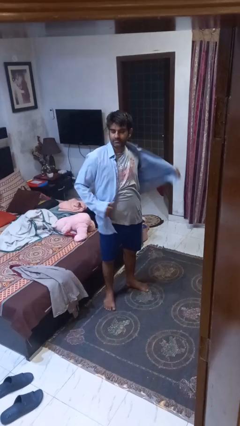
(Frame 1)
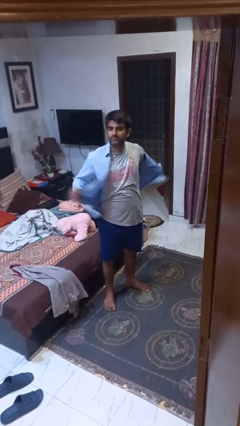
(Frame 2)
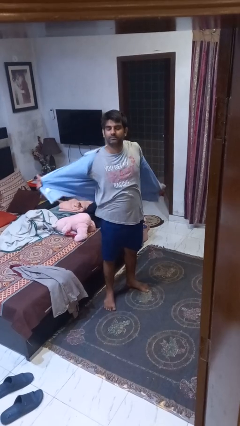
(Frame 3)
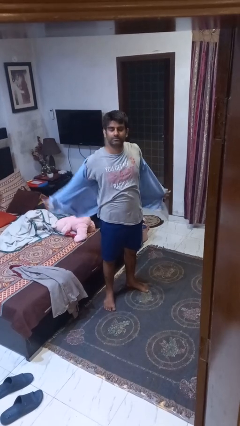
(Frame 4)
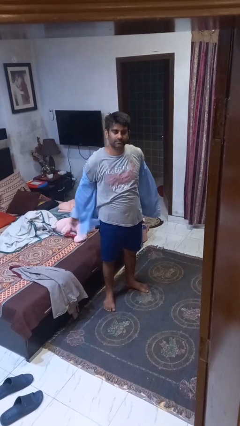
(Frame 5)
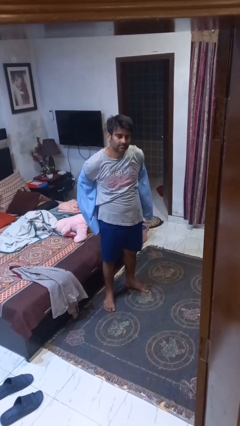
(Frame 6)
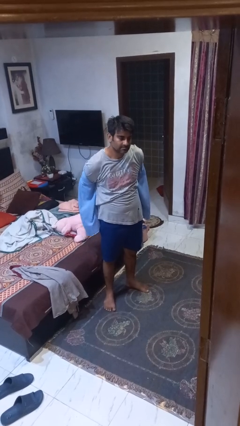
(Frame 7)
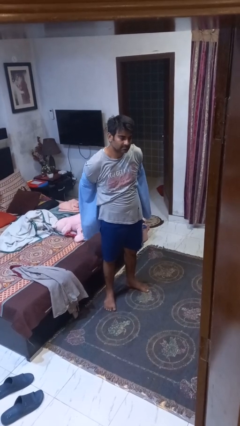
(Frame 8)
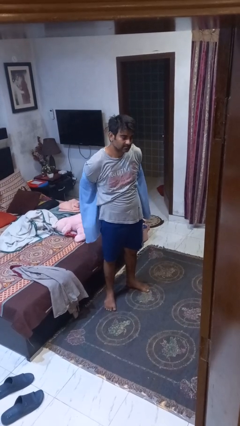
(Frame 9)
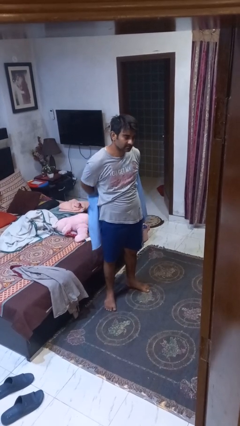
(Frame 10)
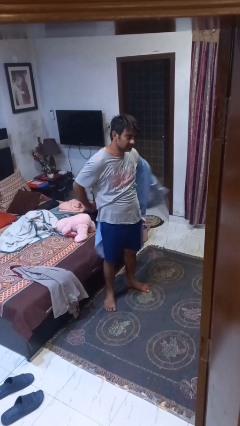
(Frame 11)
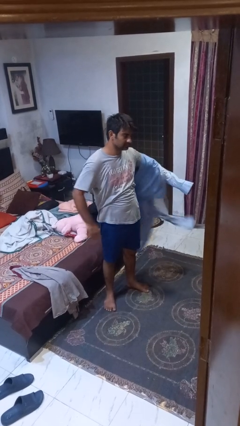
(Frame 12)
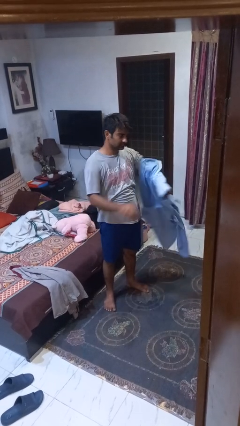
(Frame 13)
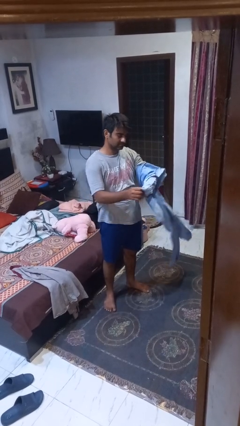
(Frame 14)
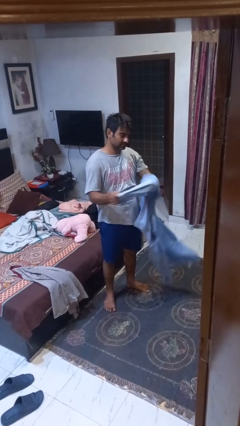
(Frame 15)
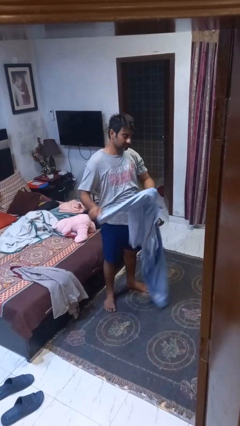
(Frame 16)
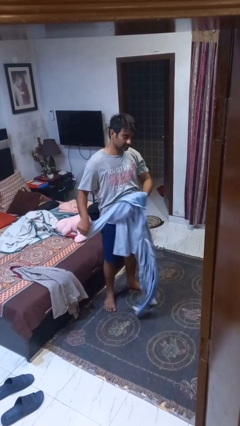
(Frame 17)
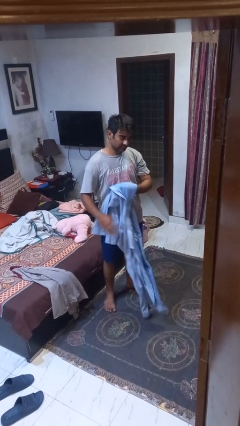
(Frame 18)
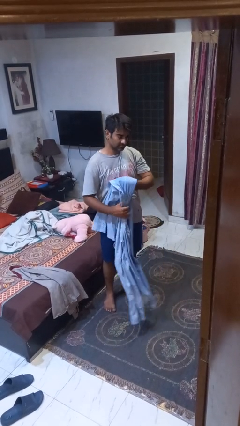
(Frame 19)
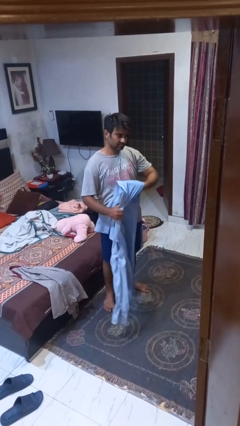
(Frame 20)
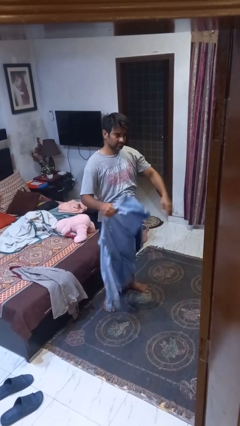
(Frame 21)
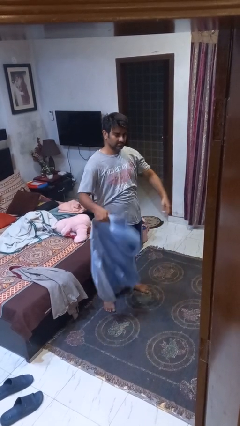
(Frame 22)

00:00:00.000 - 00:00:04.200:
person takes off shirt

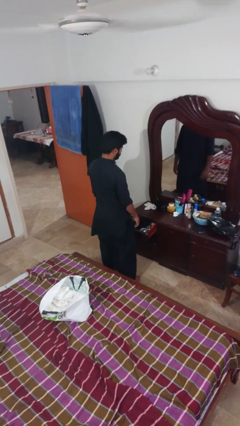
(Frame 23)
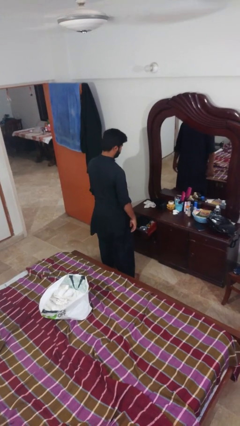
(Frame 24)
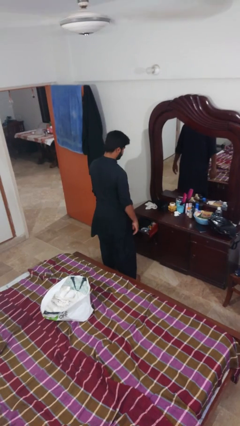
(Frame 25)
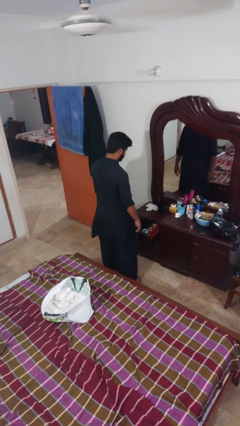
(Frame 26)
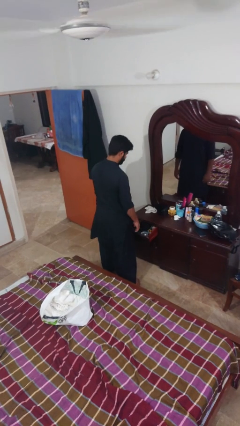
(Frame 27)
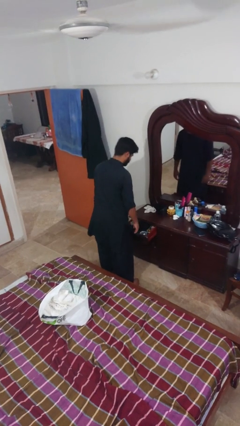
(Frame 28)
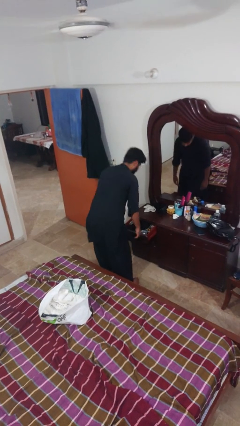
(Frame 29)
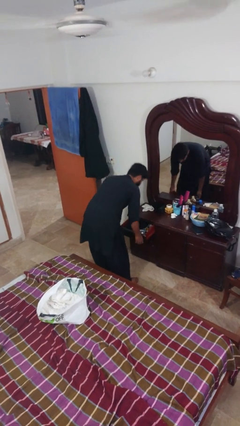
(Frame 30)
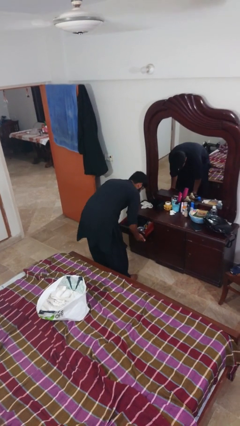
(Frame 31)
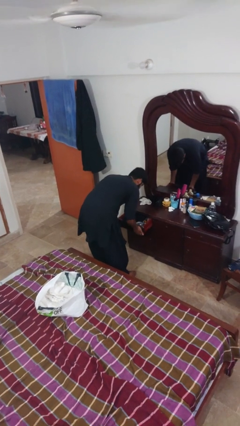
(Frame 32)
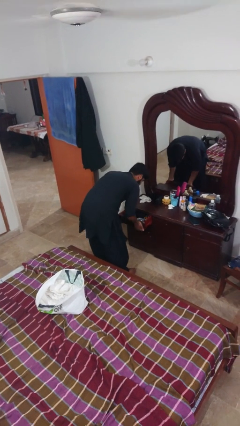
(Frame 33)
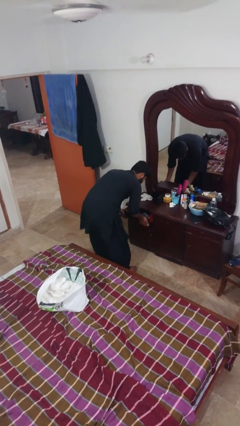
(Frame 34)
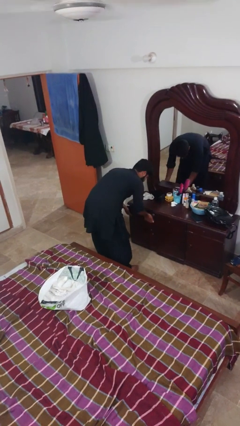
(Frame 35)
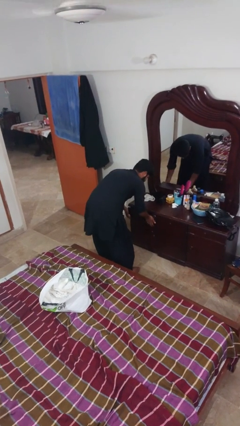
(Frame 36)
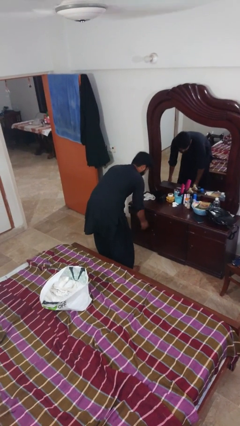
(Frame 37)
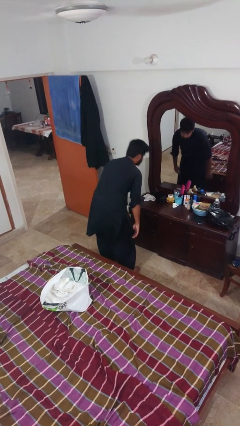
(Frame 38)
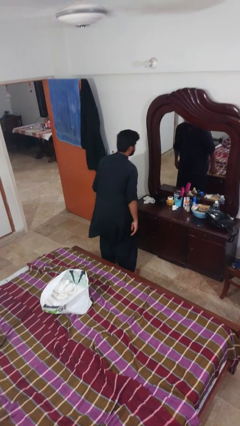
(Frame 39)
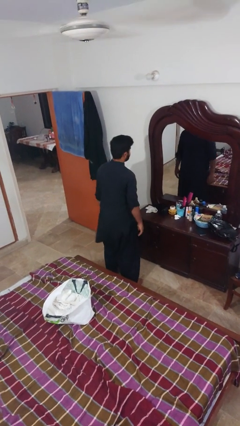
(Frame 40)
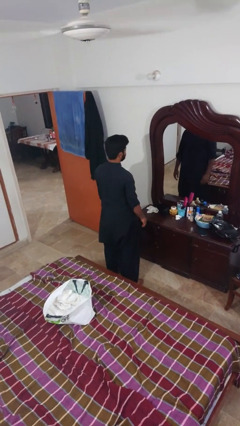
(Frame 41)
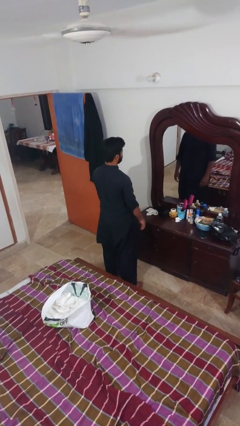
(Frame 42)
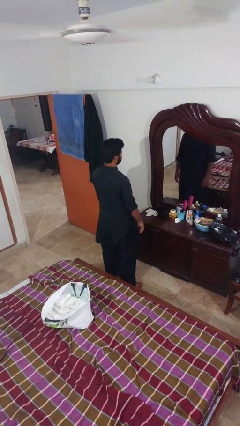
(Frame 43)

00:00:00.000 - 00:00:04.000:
person closes dresser drawer

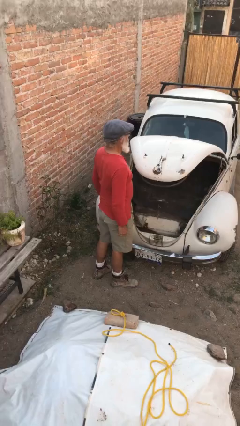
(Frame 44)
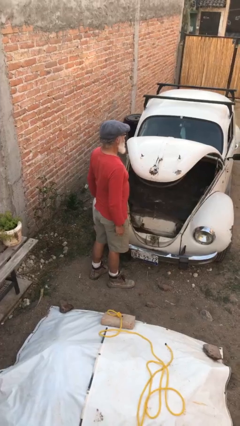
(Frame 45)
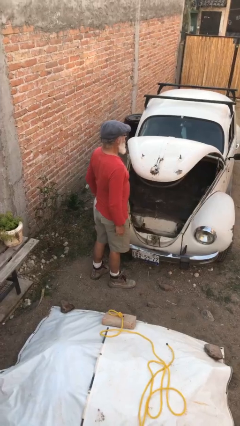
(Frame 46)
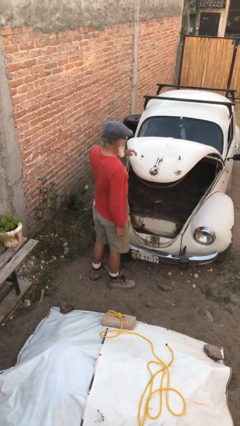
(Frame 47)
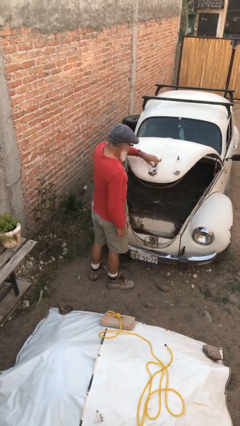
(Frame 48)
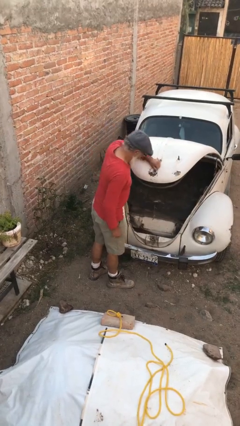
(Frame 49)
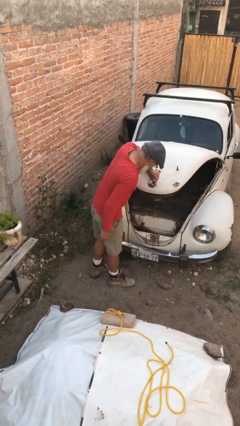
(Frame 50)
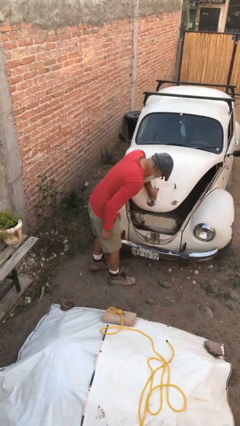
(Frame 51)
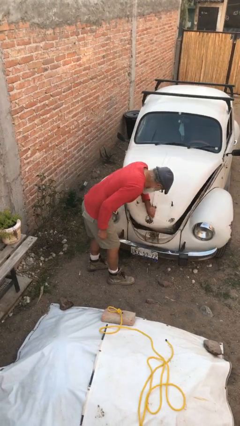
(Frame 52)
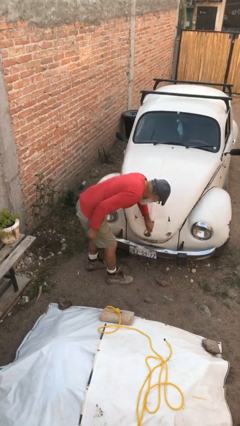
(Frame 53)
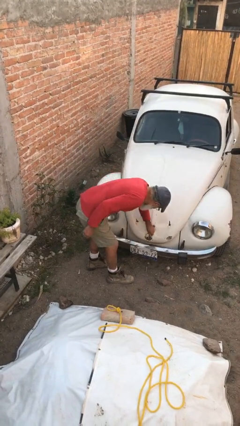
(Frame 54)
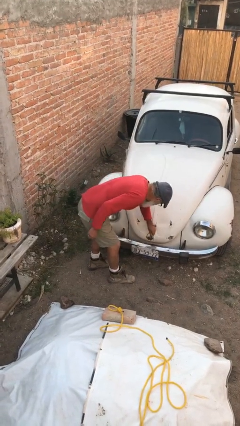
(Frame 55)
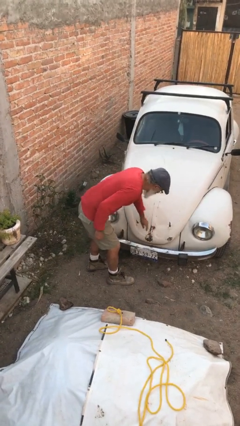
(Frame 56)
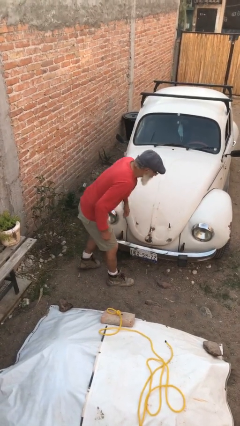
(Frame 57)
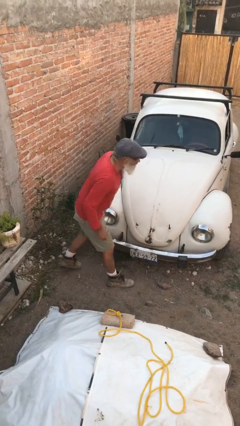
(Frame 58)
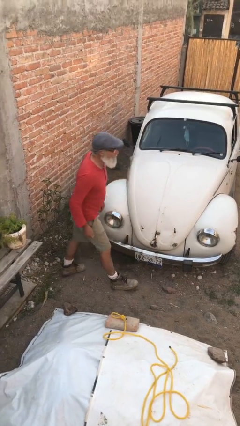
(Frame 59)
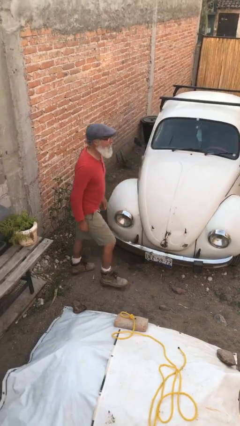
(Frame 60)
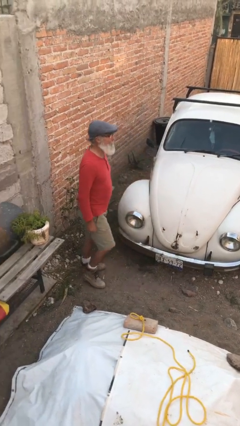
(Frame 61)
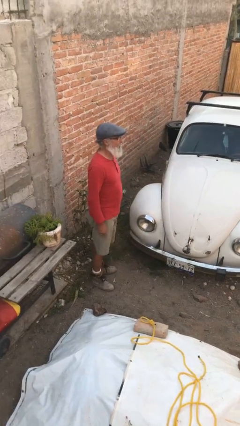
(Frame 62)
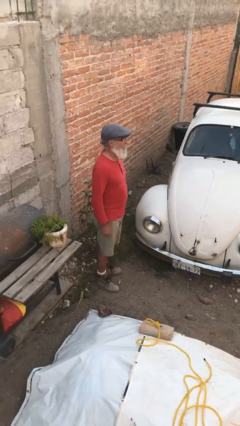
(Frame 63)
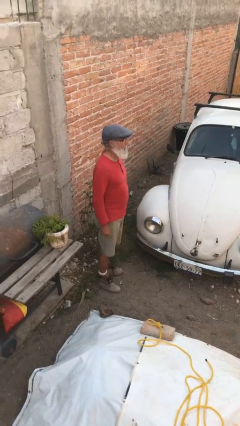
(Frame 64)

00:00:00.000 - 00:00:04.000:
person closes car trunk

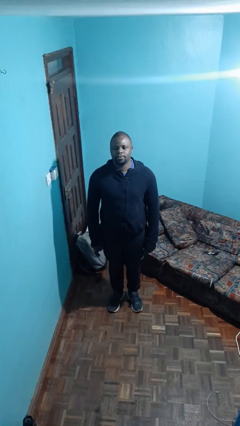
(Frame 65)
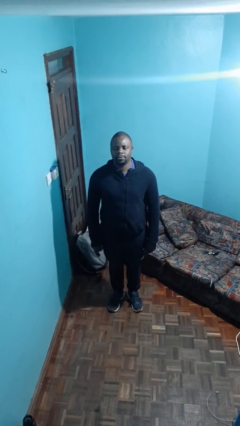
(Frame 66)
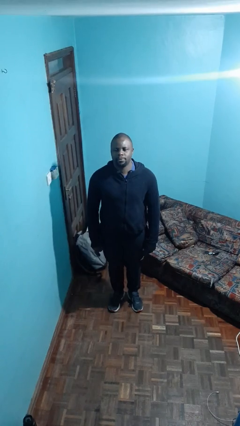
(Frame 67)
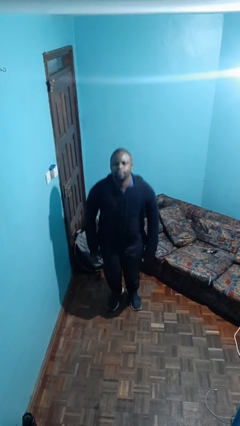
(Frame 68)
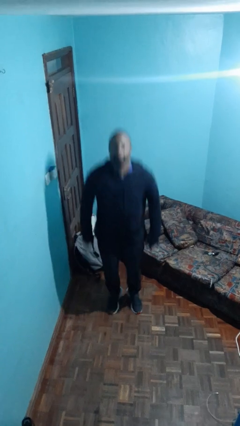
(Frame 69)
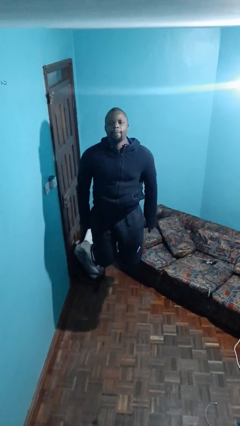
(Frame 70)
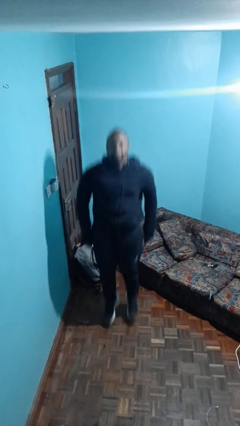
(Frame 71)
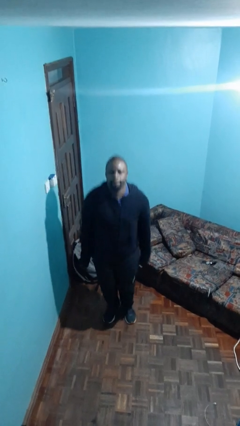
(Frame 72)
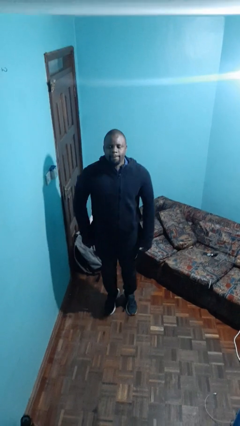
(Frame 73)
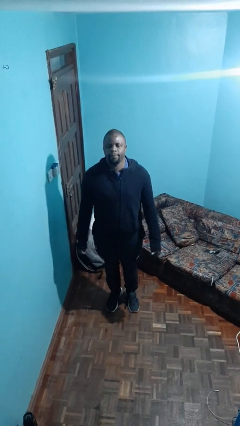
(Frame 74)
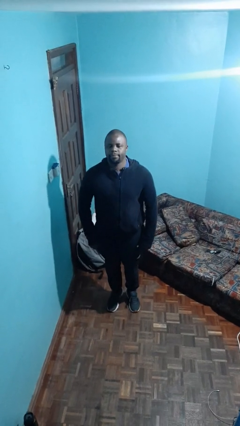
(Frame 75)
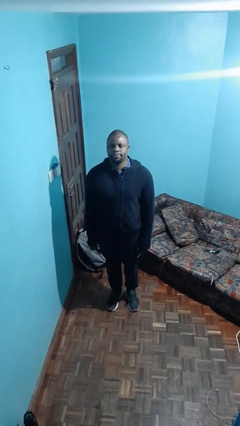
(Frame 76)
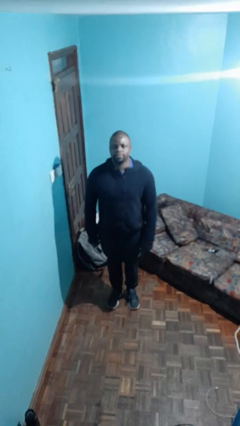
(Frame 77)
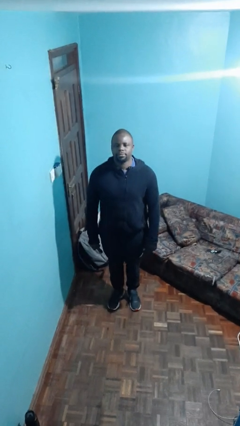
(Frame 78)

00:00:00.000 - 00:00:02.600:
person jumps

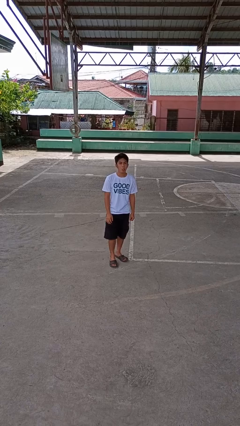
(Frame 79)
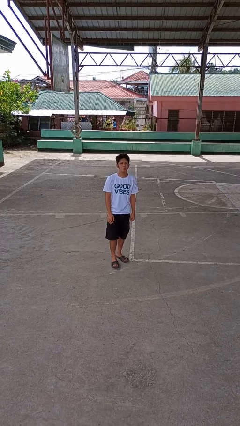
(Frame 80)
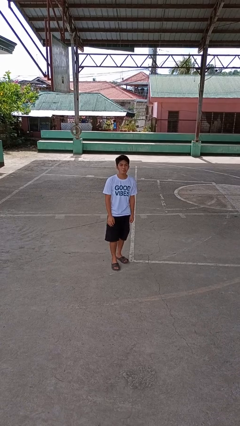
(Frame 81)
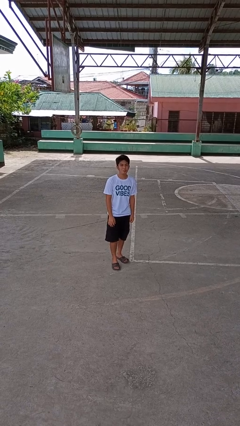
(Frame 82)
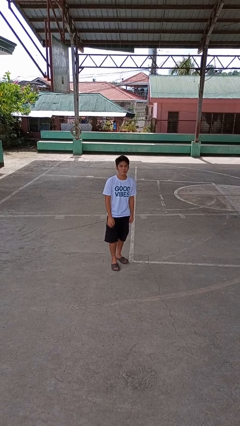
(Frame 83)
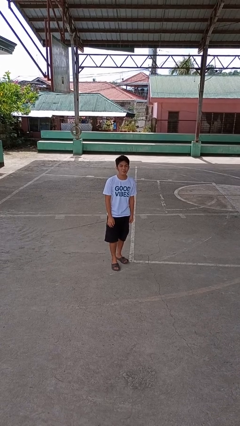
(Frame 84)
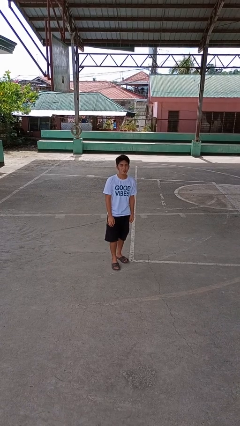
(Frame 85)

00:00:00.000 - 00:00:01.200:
person sticks out tongue

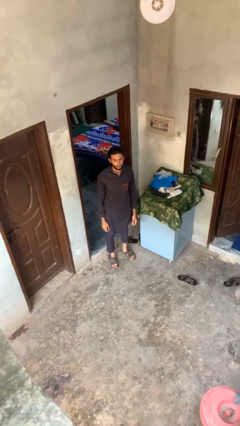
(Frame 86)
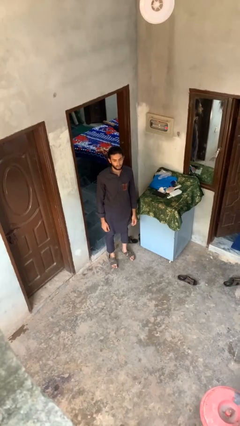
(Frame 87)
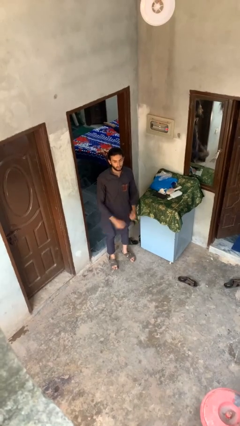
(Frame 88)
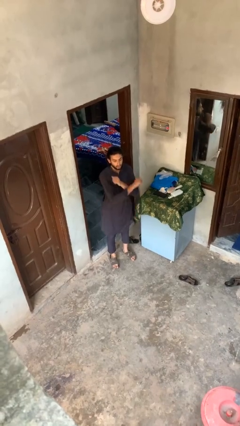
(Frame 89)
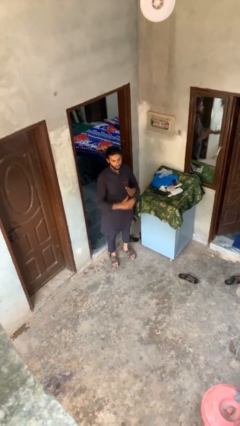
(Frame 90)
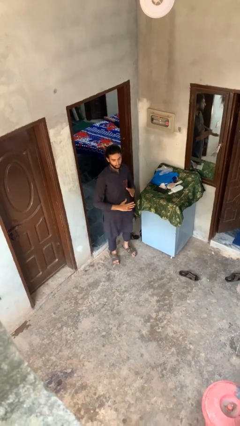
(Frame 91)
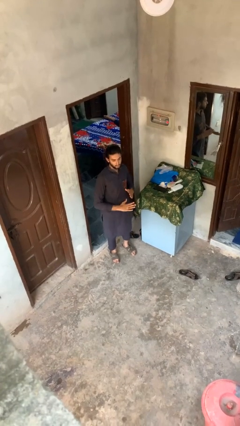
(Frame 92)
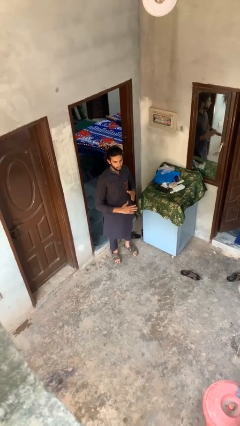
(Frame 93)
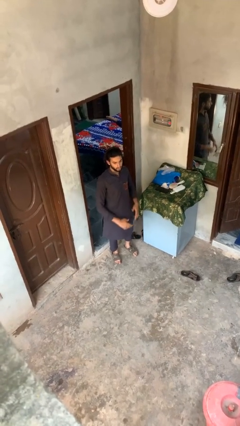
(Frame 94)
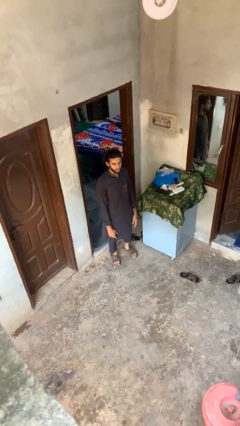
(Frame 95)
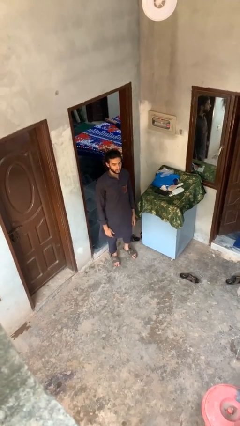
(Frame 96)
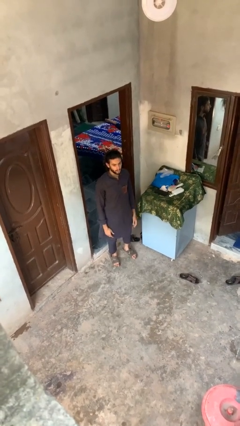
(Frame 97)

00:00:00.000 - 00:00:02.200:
person karate chop
